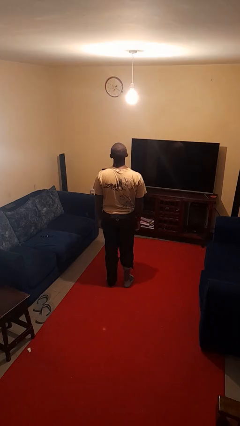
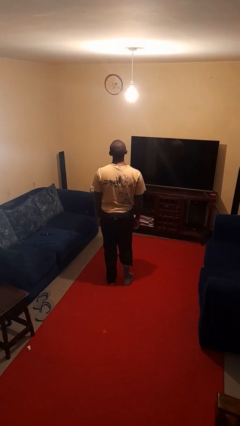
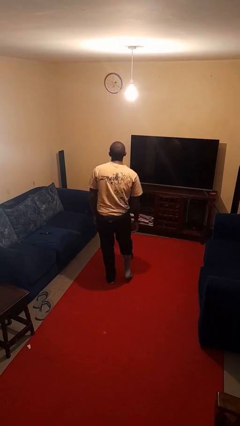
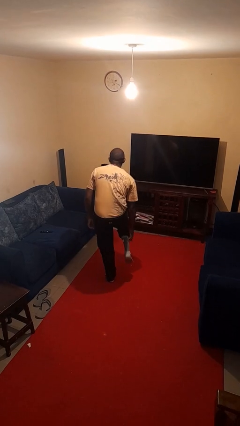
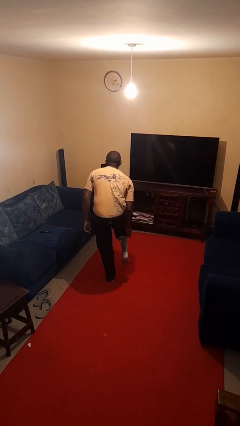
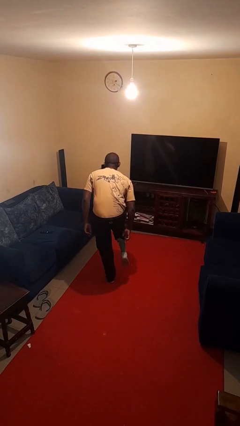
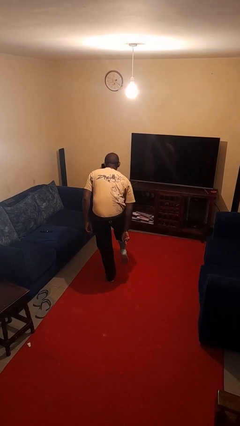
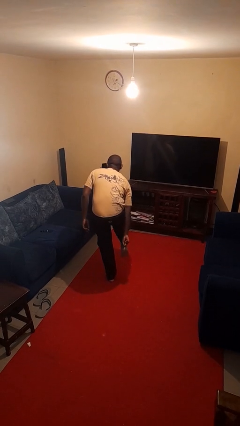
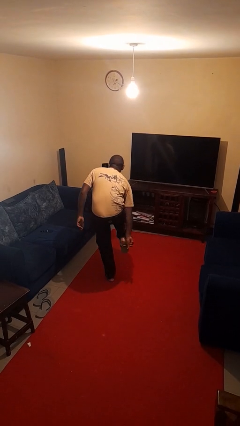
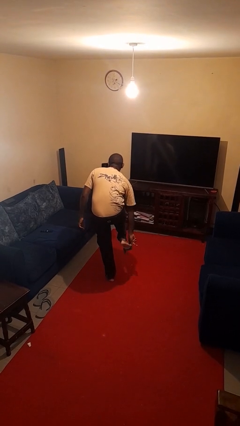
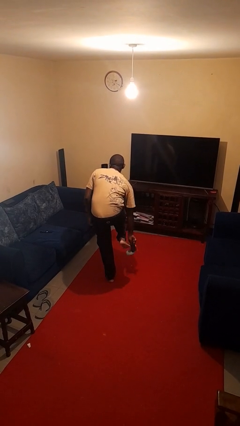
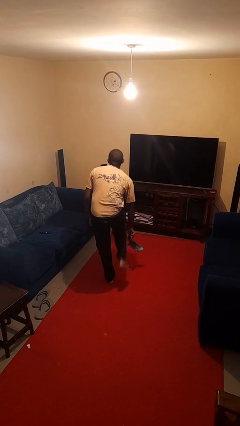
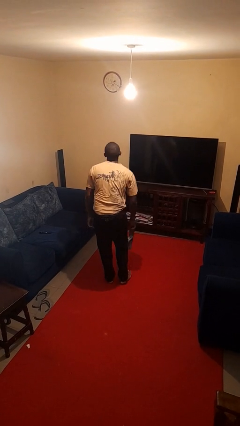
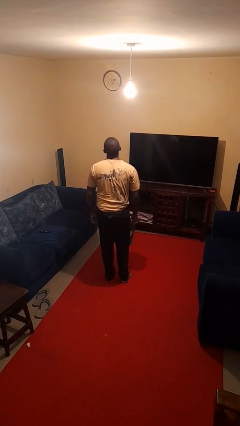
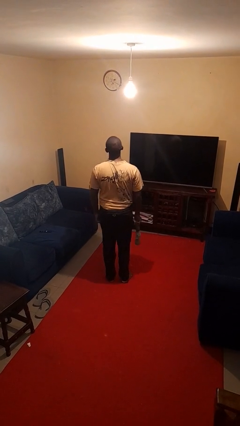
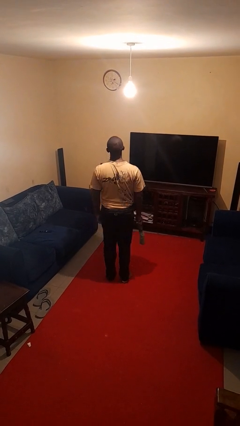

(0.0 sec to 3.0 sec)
person takes off socks

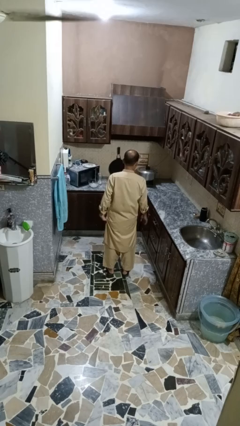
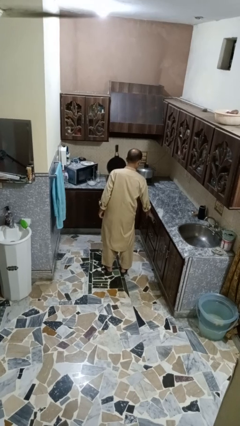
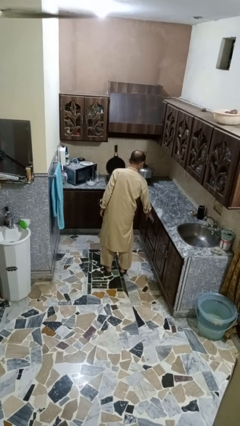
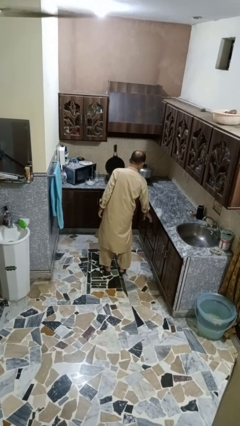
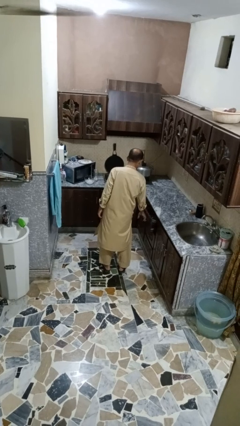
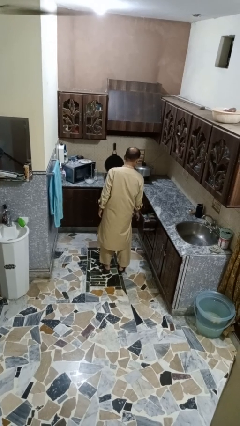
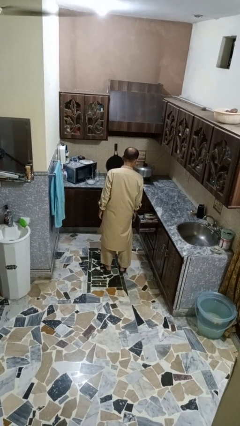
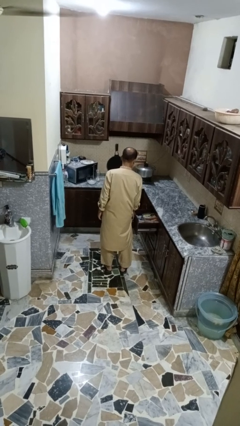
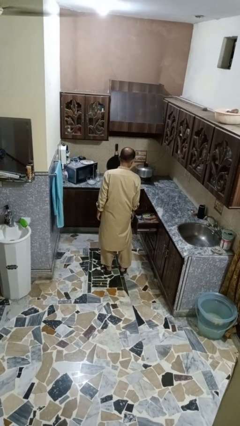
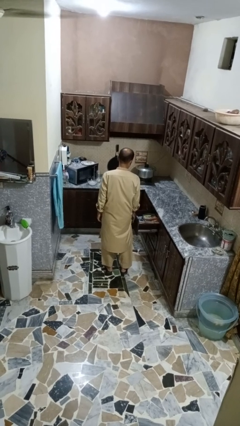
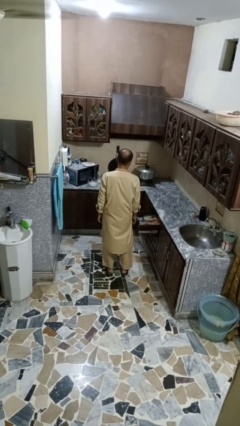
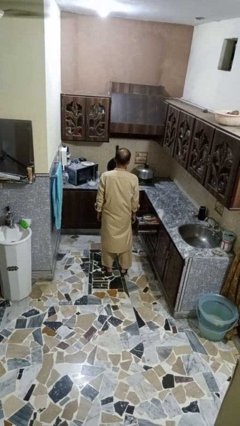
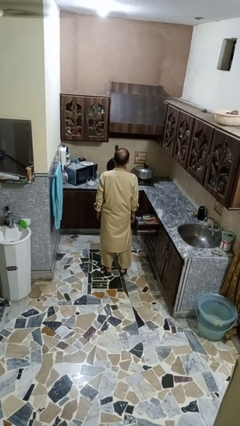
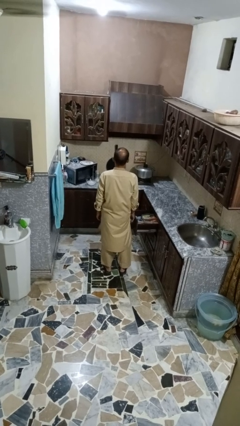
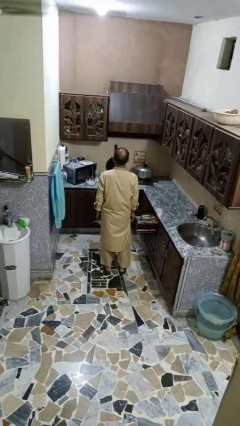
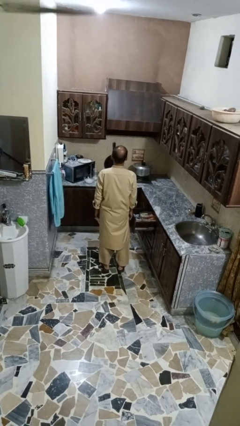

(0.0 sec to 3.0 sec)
person opens kitchen drawer

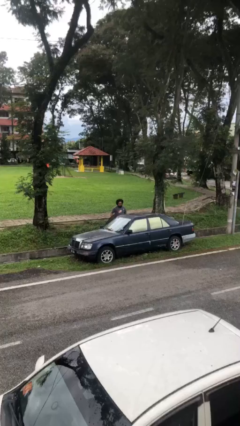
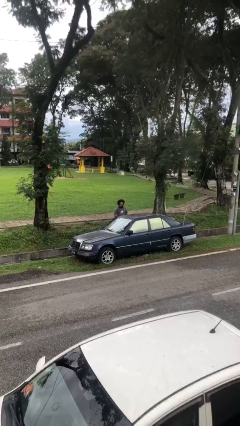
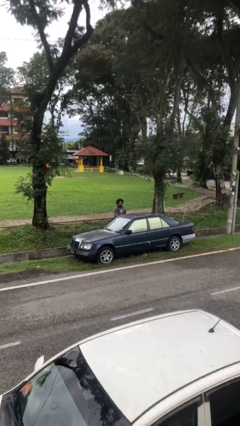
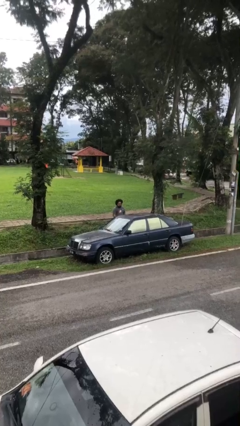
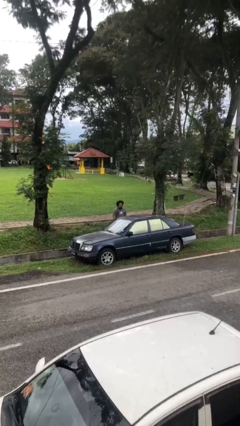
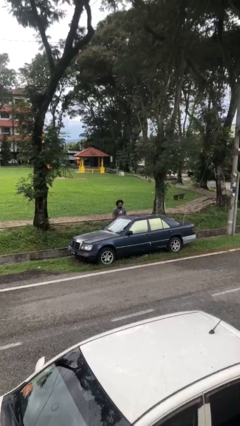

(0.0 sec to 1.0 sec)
person closes car door

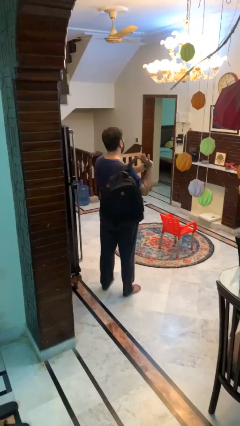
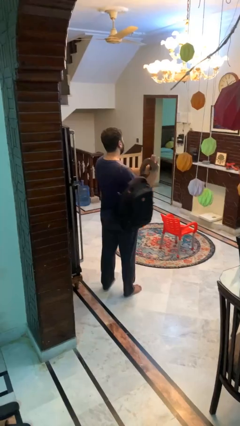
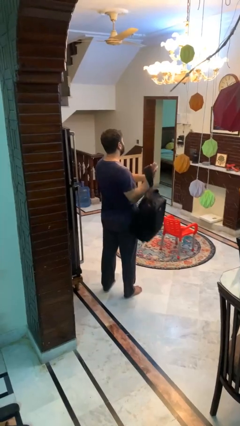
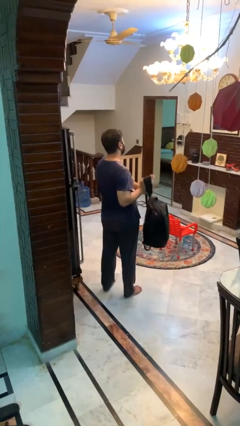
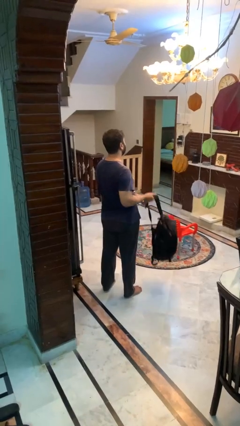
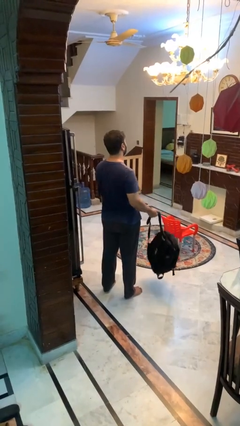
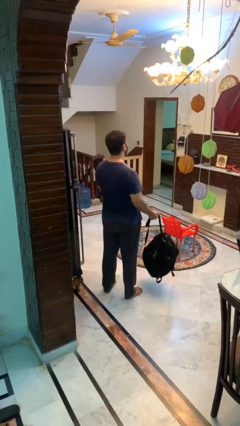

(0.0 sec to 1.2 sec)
person takes off backpack

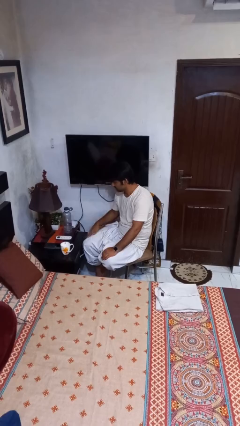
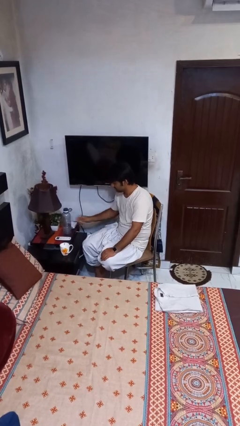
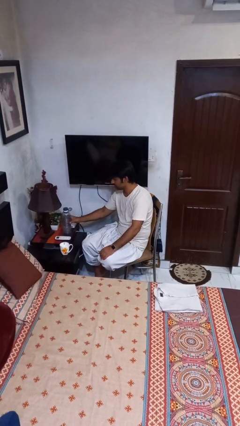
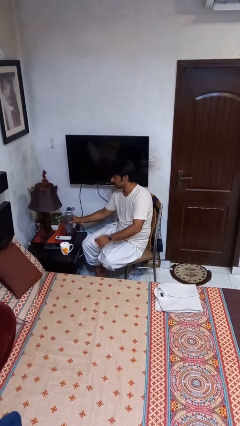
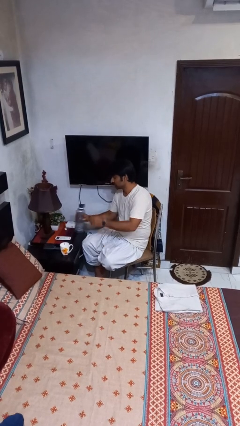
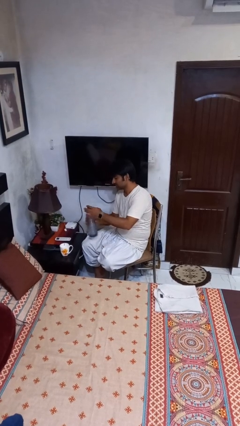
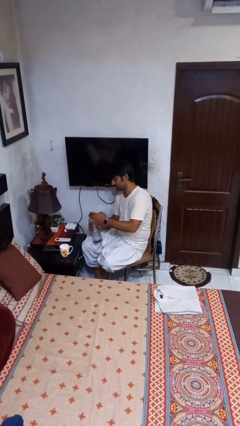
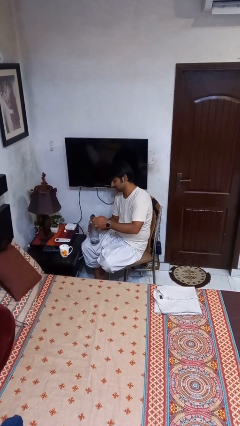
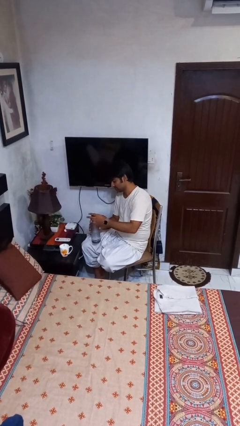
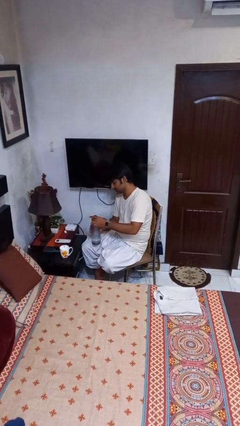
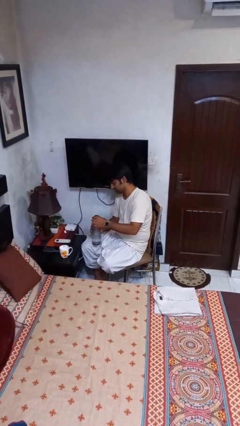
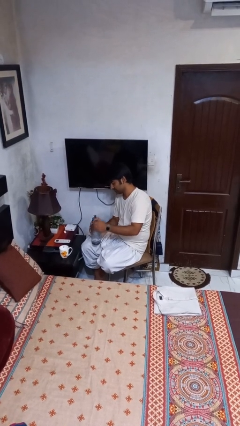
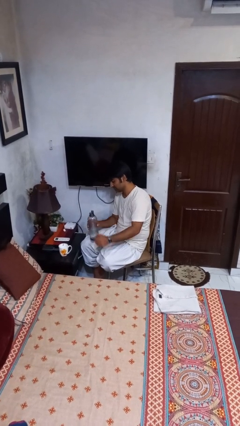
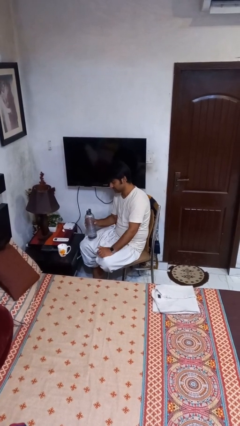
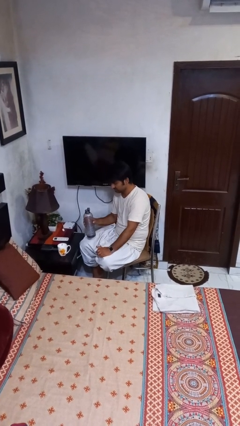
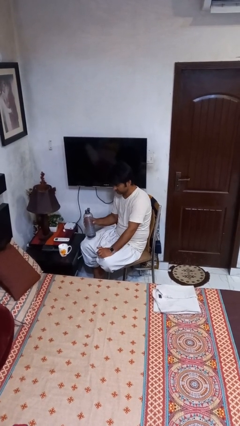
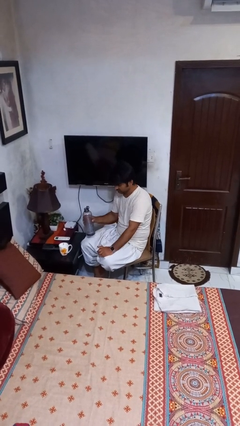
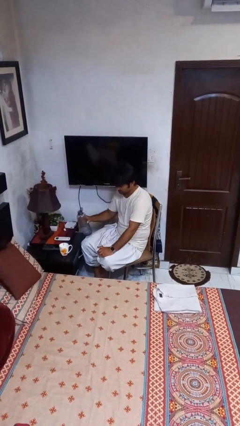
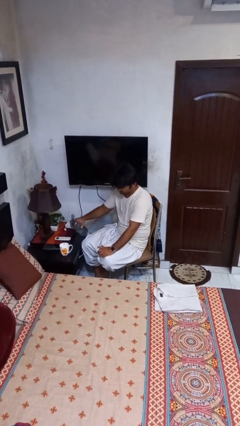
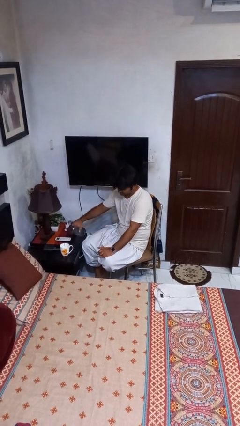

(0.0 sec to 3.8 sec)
person unscrews lid from bottle

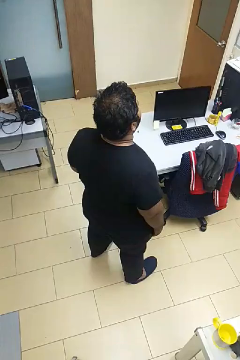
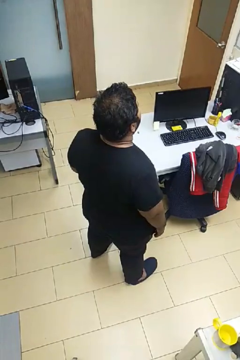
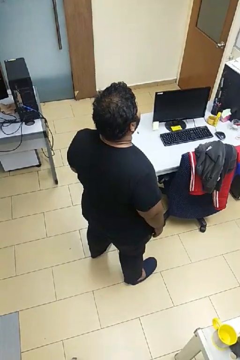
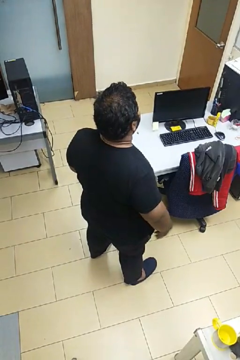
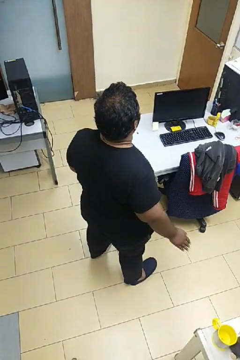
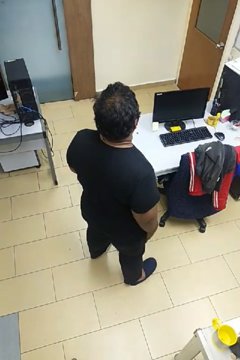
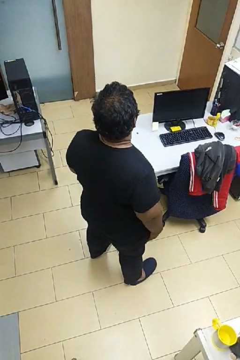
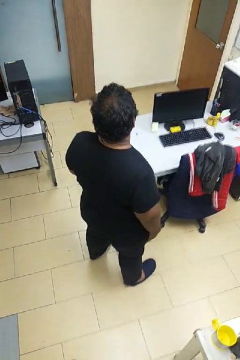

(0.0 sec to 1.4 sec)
person slaps hands on thighs

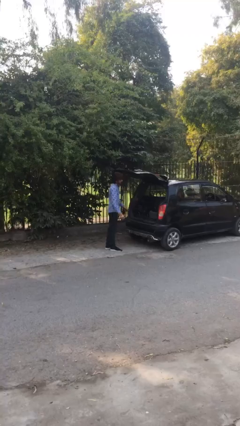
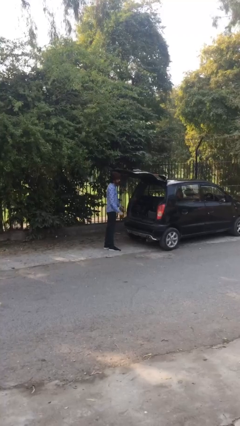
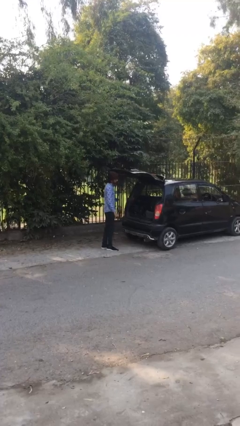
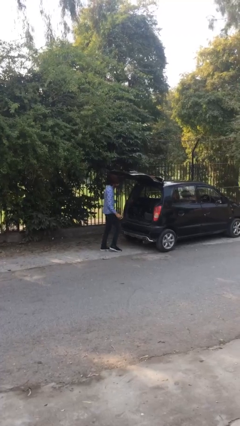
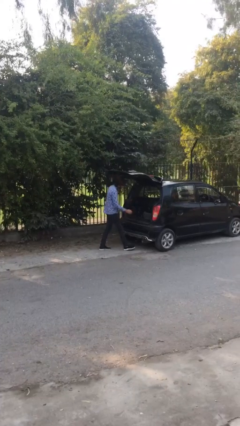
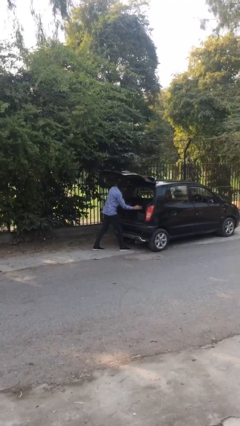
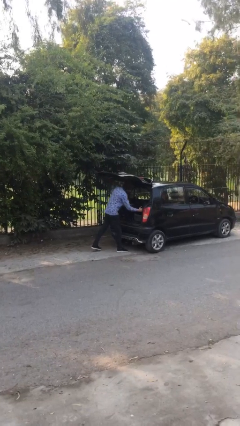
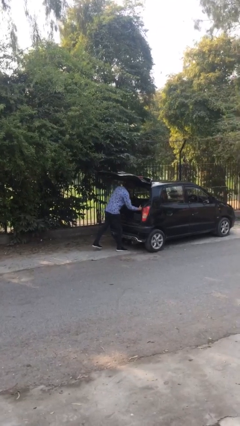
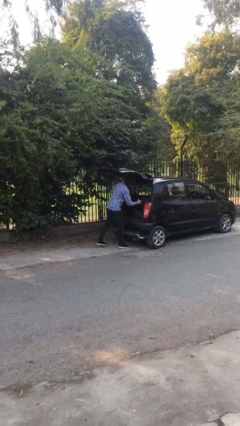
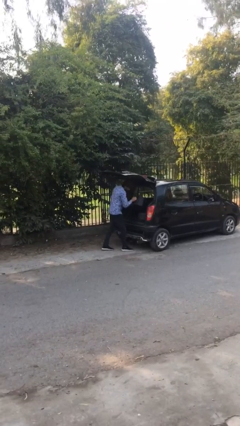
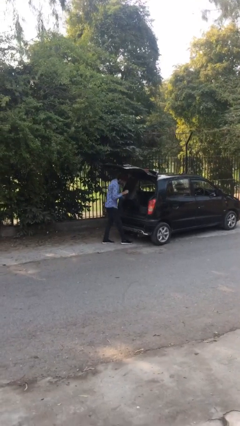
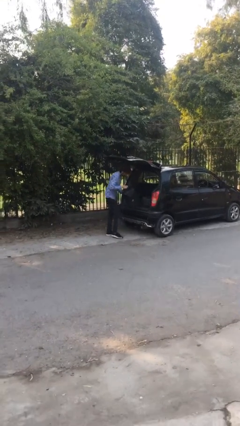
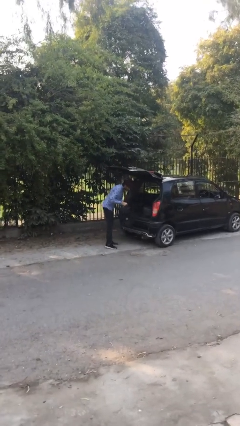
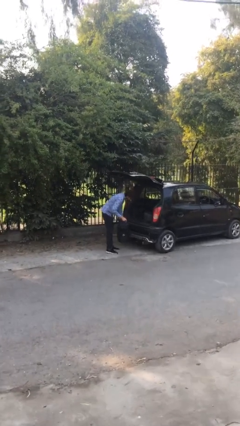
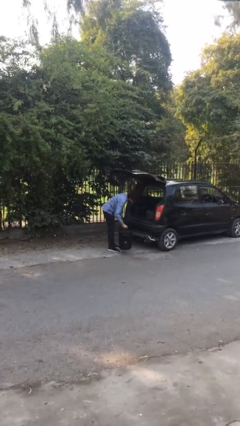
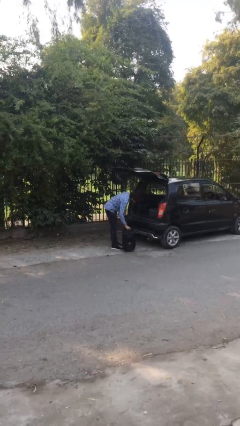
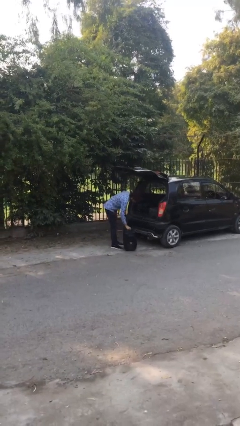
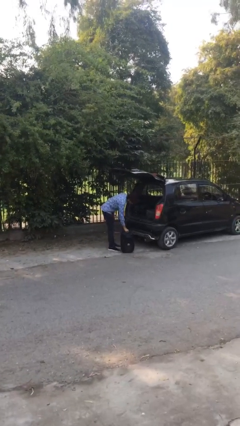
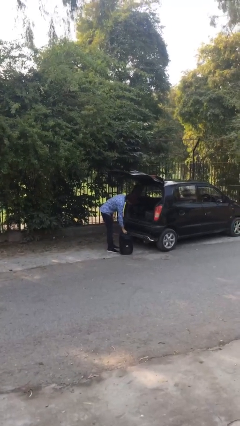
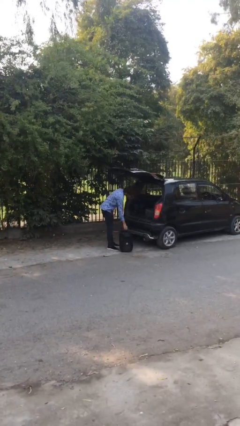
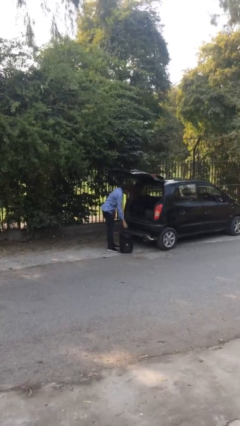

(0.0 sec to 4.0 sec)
person unloads car
